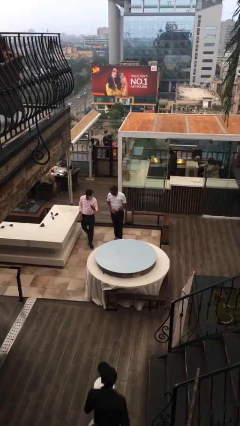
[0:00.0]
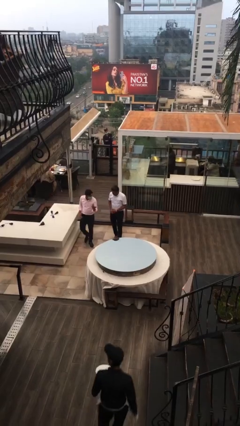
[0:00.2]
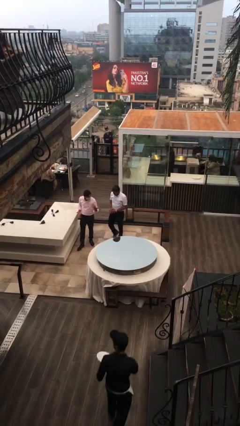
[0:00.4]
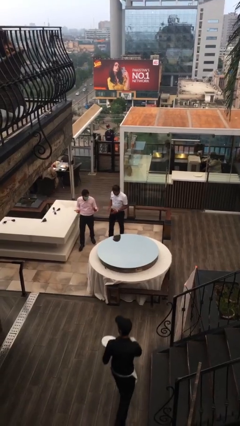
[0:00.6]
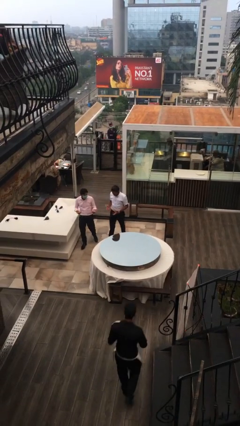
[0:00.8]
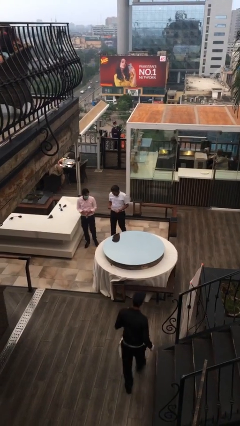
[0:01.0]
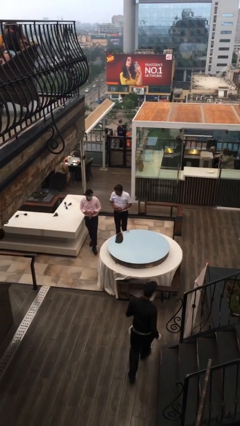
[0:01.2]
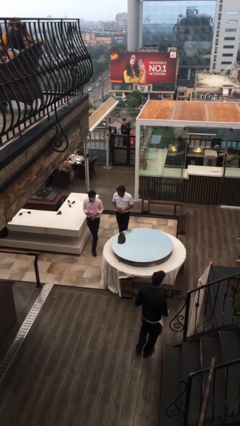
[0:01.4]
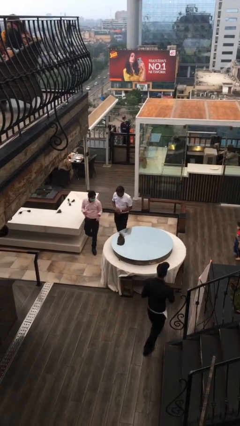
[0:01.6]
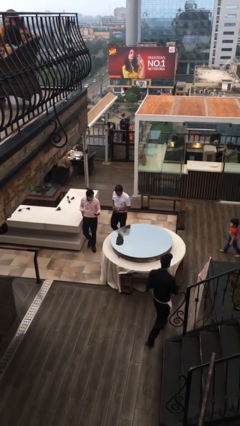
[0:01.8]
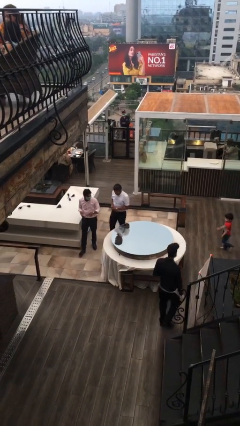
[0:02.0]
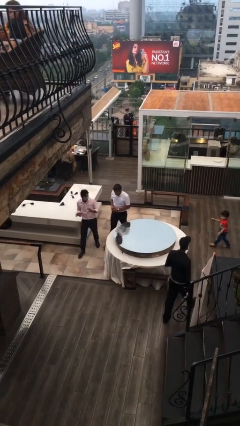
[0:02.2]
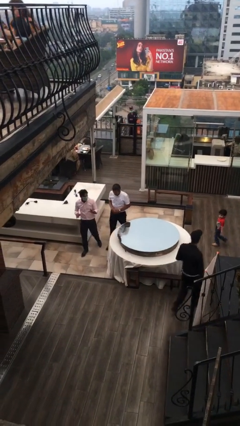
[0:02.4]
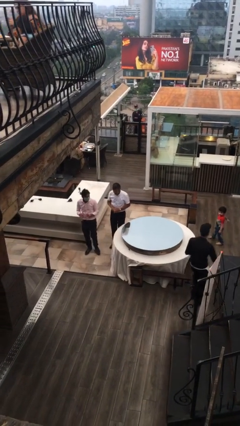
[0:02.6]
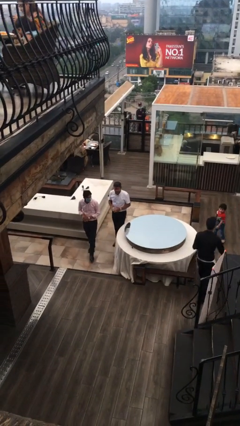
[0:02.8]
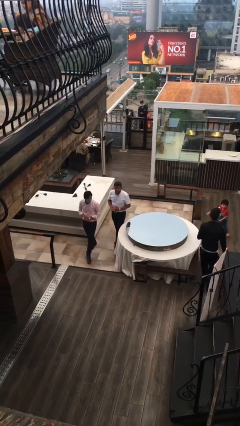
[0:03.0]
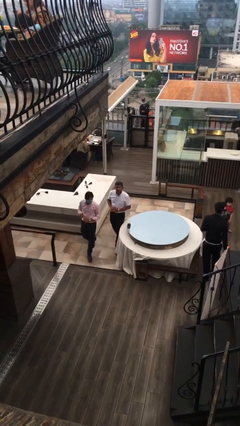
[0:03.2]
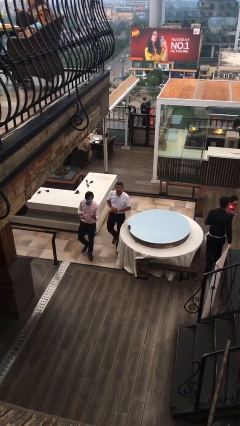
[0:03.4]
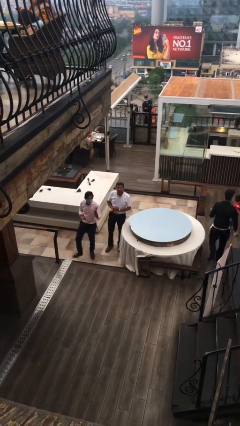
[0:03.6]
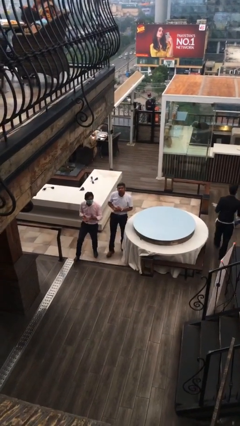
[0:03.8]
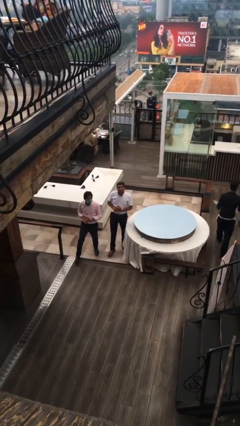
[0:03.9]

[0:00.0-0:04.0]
person talks to person

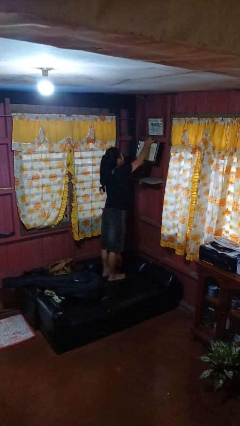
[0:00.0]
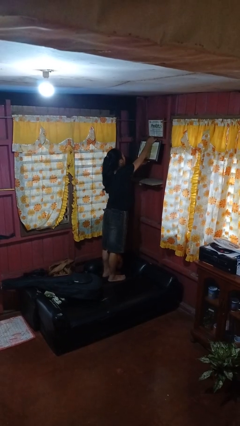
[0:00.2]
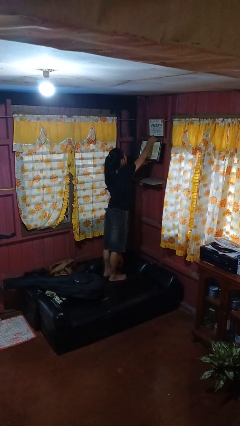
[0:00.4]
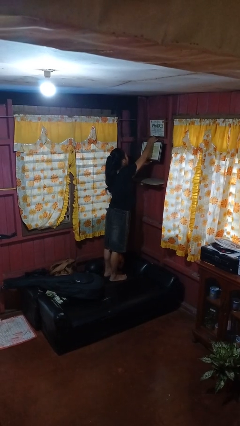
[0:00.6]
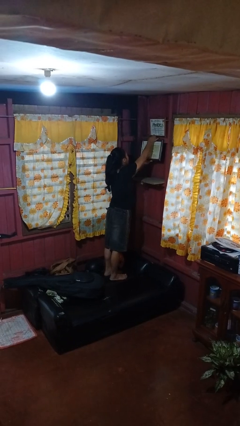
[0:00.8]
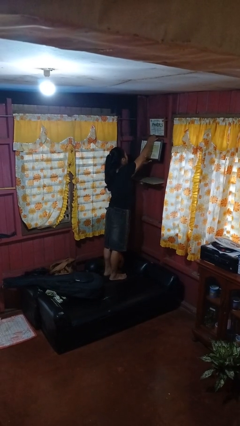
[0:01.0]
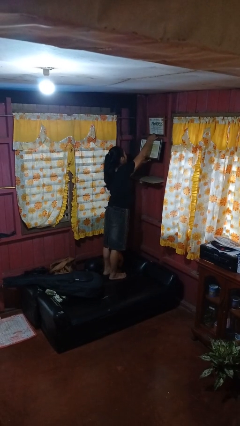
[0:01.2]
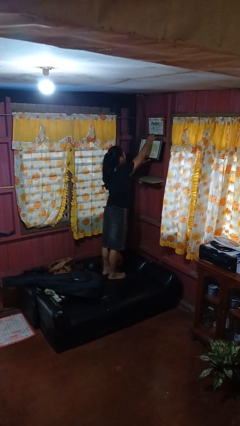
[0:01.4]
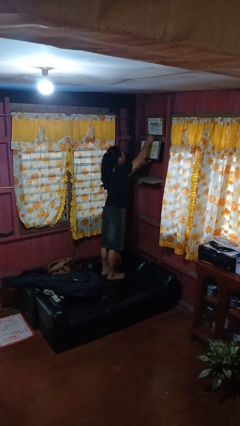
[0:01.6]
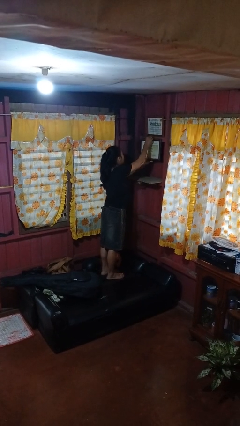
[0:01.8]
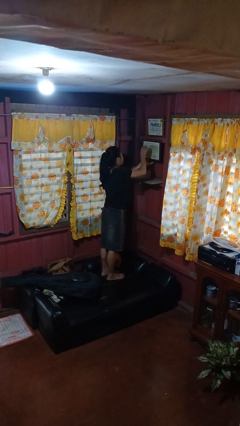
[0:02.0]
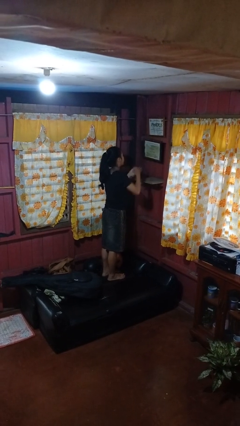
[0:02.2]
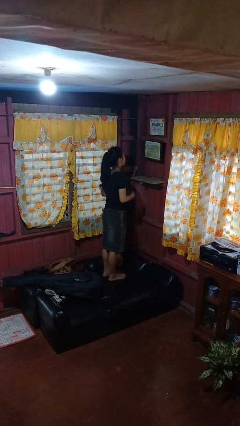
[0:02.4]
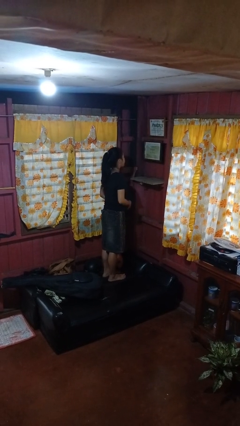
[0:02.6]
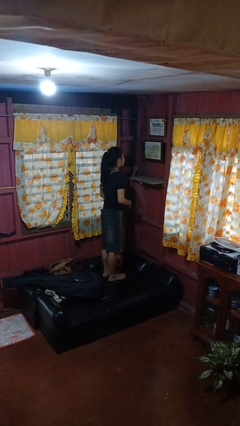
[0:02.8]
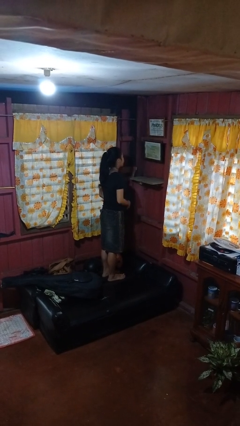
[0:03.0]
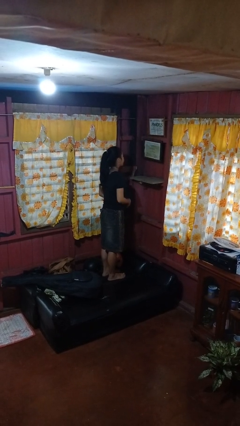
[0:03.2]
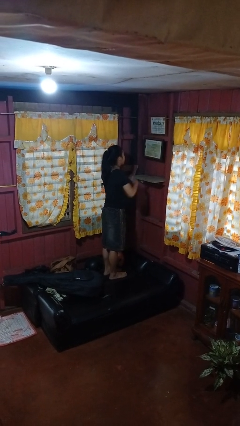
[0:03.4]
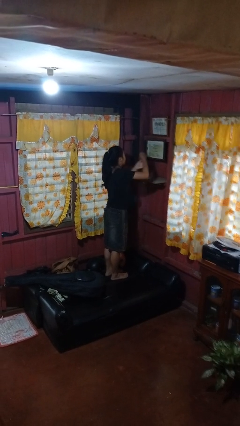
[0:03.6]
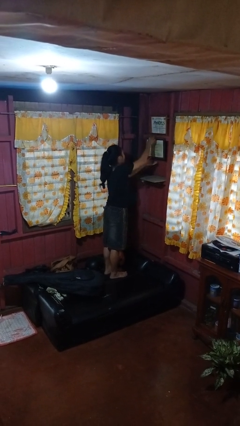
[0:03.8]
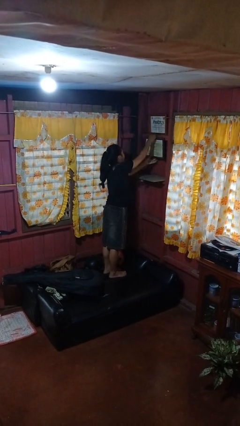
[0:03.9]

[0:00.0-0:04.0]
person puts up picture frame

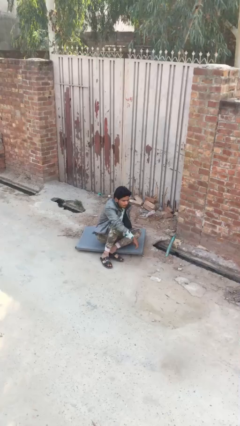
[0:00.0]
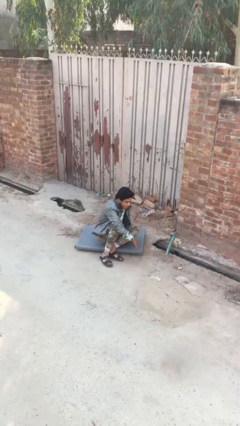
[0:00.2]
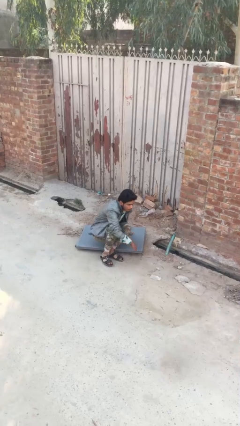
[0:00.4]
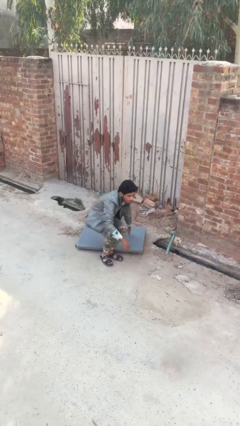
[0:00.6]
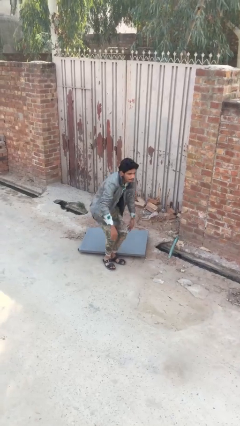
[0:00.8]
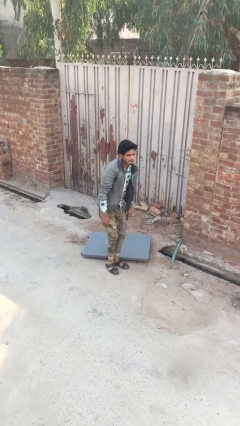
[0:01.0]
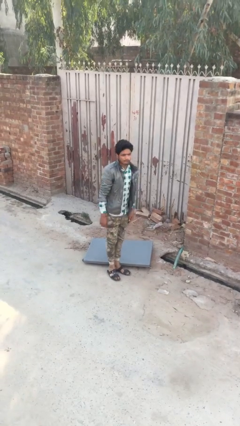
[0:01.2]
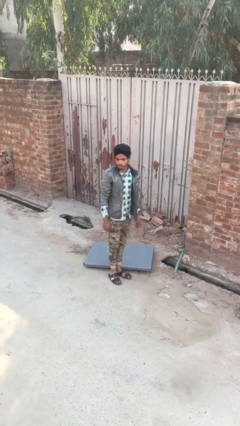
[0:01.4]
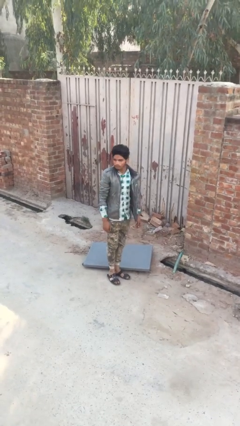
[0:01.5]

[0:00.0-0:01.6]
person stands up

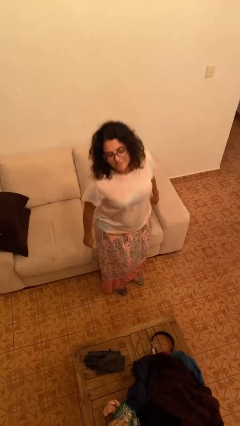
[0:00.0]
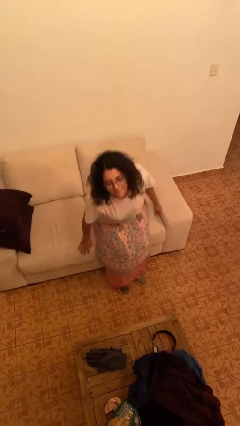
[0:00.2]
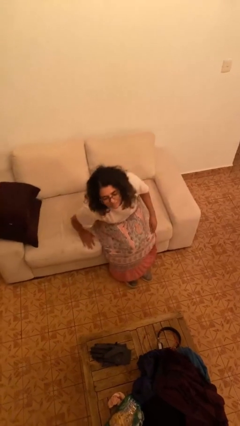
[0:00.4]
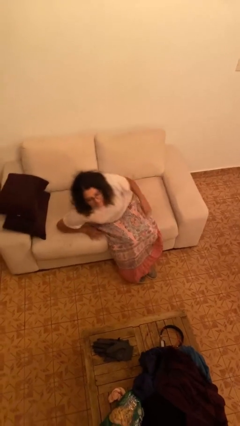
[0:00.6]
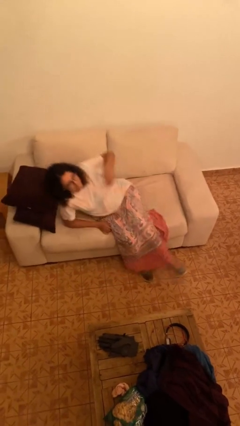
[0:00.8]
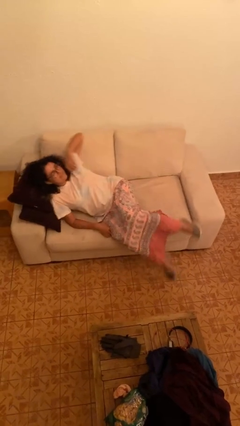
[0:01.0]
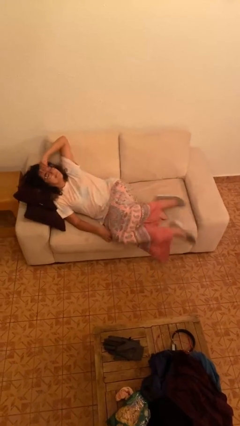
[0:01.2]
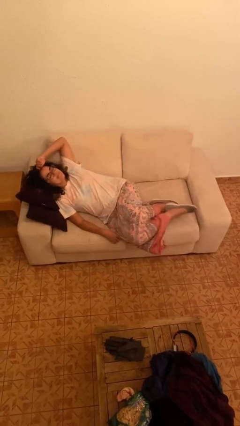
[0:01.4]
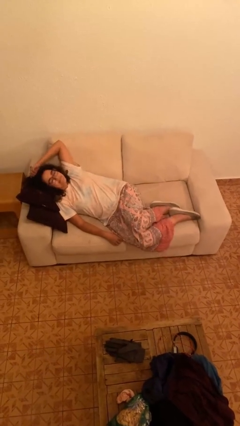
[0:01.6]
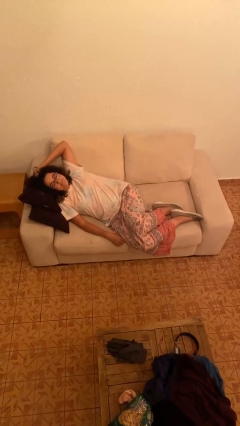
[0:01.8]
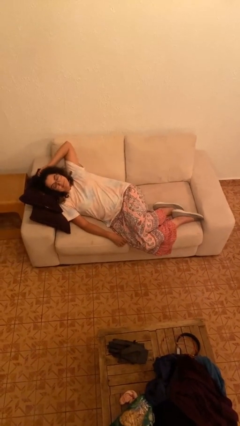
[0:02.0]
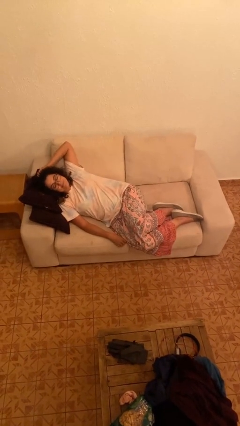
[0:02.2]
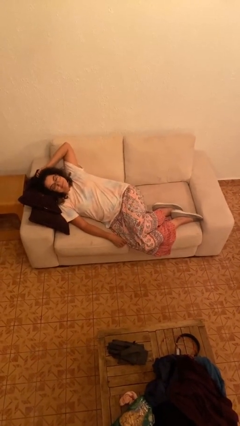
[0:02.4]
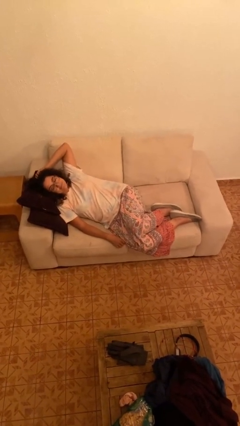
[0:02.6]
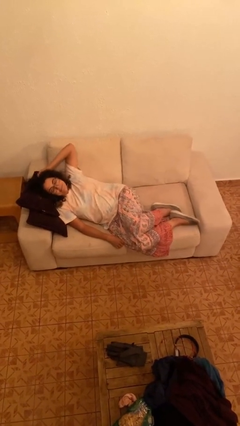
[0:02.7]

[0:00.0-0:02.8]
person lies down on couch

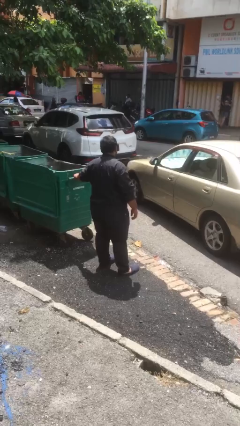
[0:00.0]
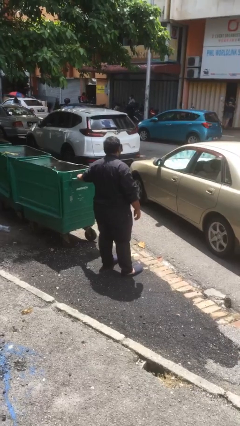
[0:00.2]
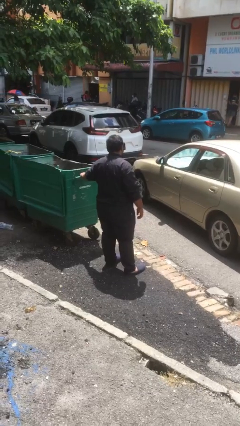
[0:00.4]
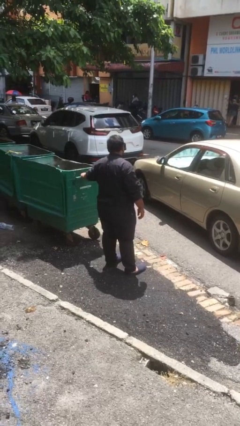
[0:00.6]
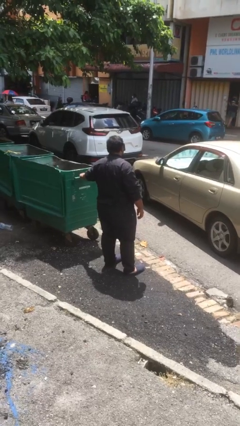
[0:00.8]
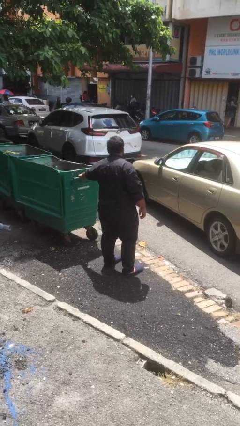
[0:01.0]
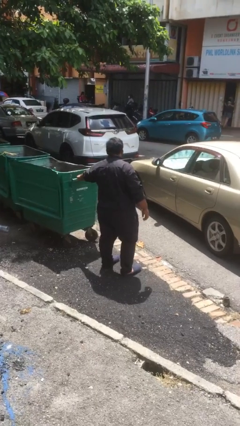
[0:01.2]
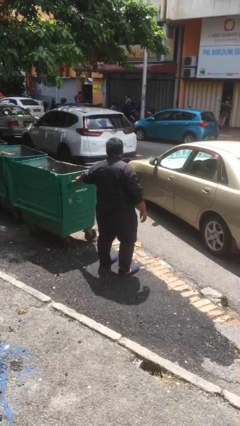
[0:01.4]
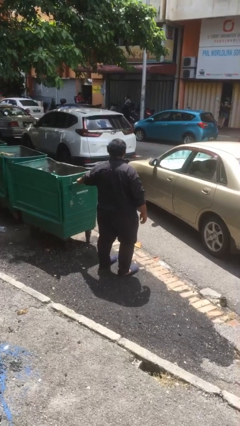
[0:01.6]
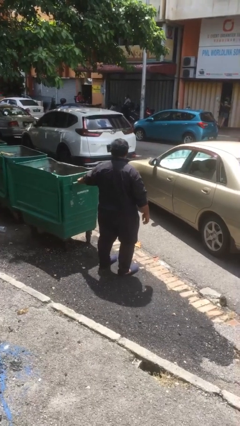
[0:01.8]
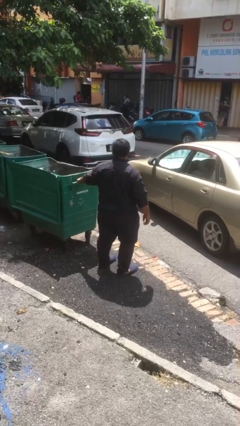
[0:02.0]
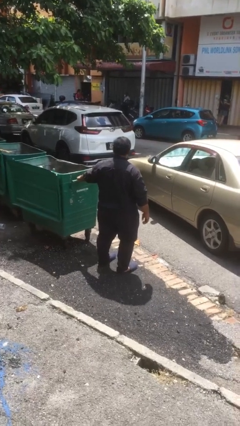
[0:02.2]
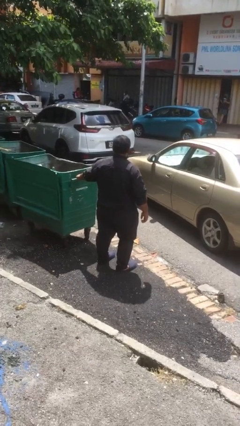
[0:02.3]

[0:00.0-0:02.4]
person pulls wheeled trashcan

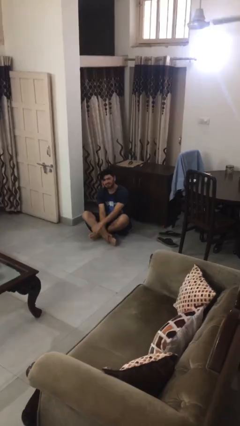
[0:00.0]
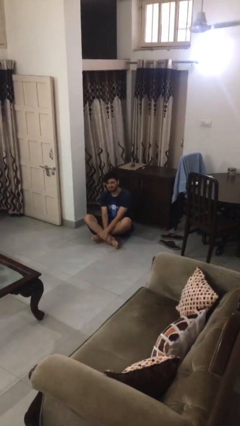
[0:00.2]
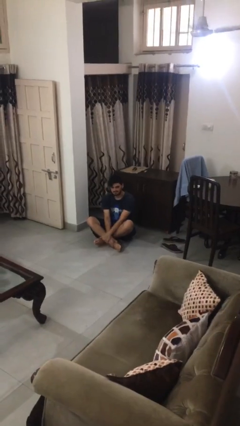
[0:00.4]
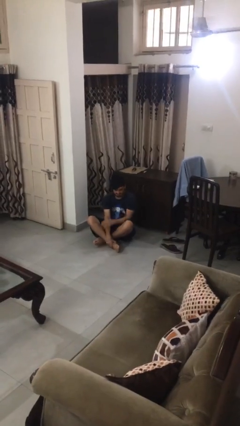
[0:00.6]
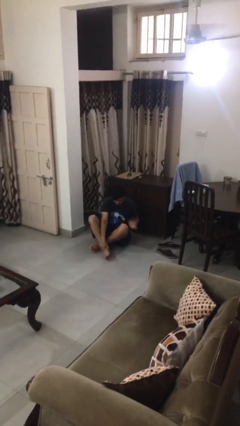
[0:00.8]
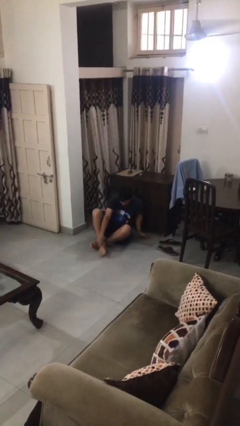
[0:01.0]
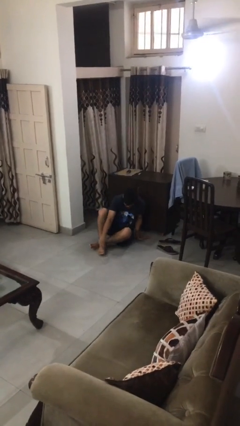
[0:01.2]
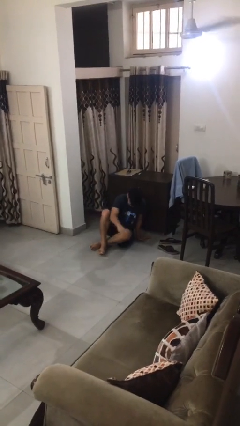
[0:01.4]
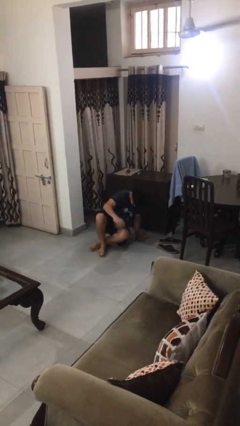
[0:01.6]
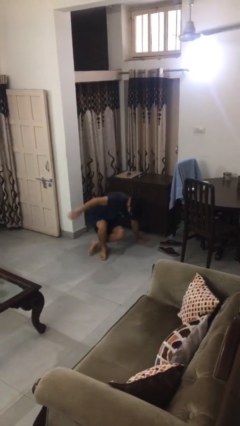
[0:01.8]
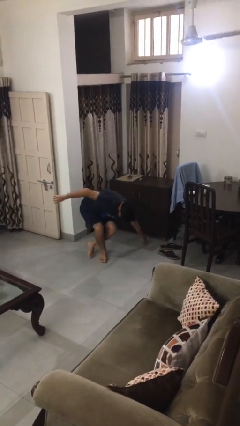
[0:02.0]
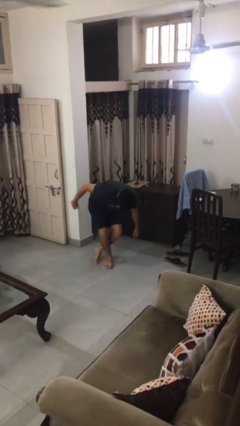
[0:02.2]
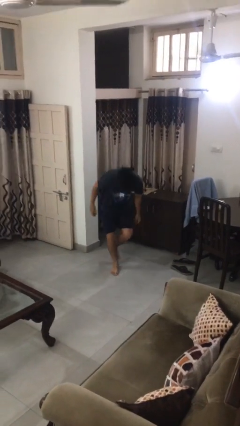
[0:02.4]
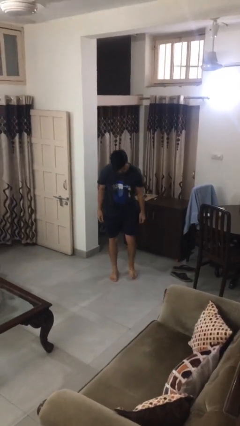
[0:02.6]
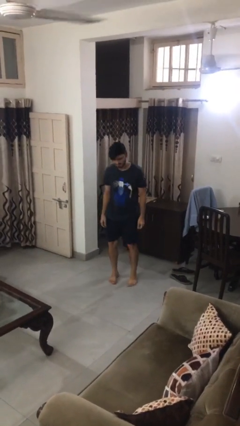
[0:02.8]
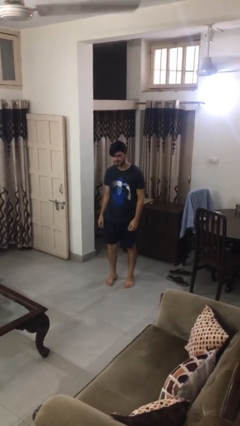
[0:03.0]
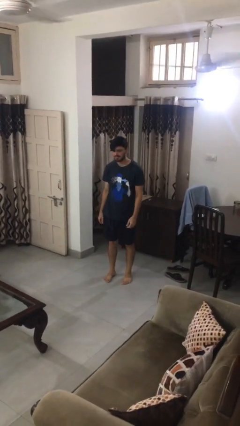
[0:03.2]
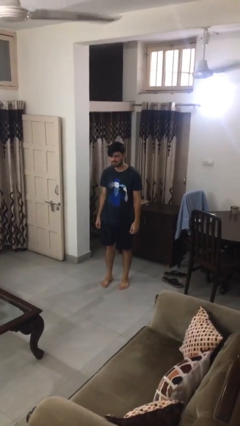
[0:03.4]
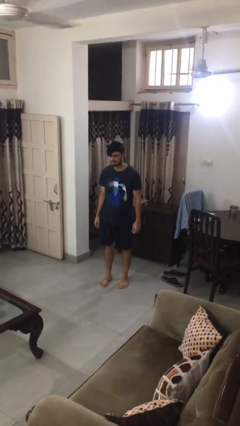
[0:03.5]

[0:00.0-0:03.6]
person stands up from floor
